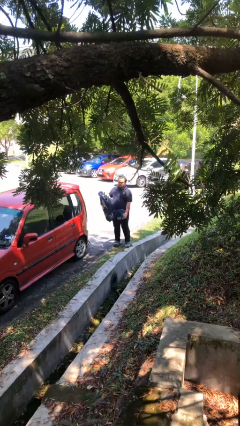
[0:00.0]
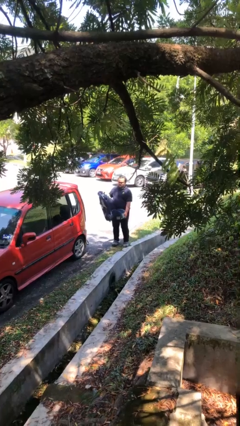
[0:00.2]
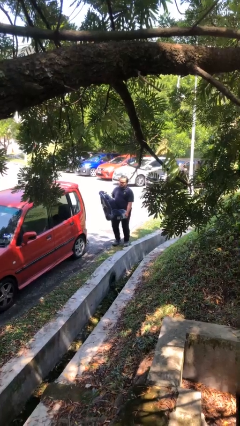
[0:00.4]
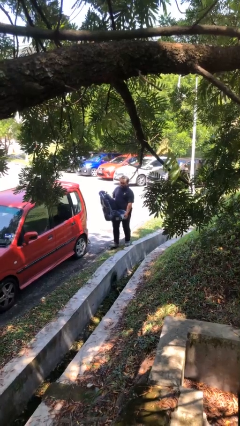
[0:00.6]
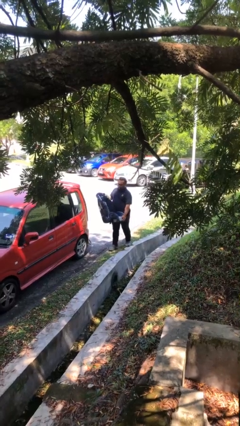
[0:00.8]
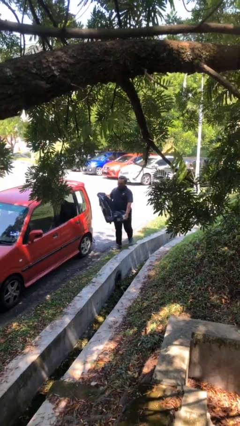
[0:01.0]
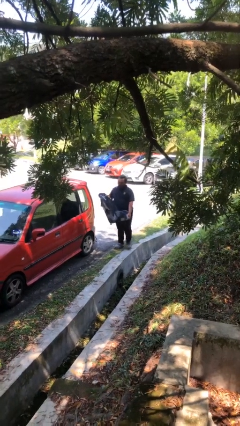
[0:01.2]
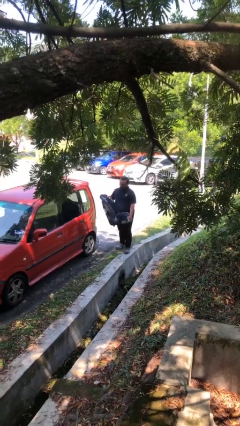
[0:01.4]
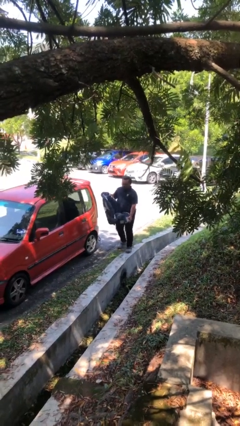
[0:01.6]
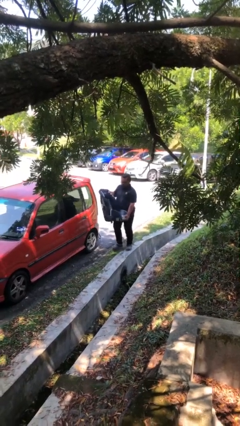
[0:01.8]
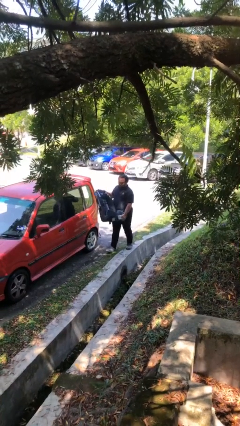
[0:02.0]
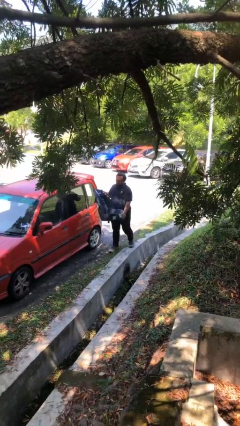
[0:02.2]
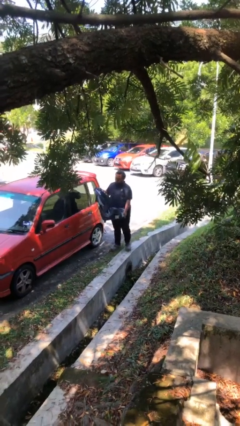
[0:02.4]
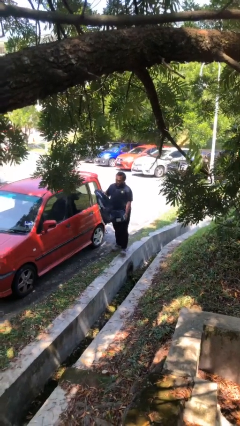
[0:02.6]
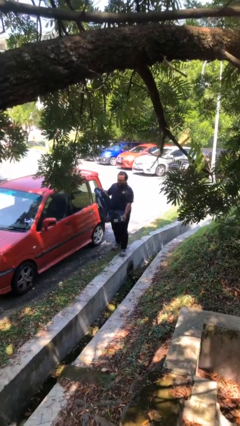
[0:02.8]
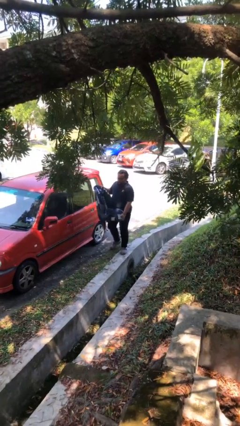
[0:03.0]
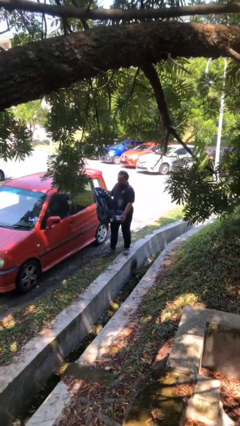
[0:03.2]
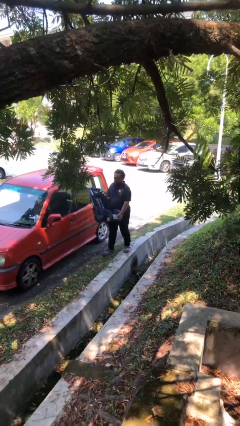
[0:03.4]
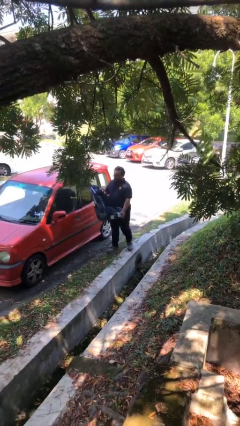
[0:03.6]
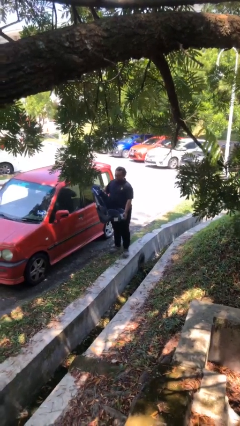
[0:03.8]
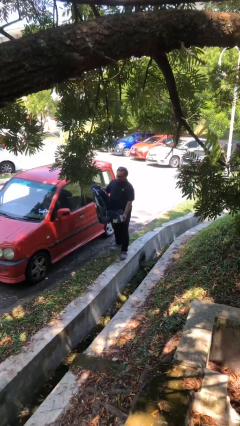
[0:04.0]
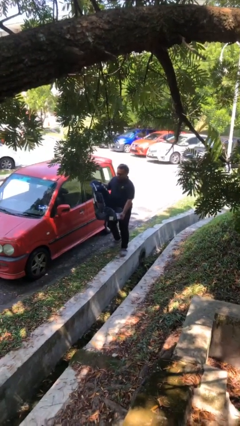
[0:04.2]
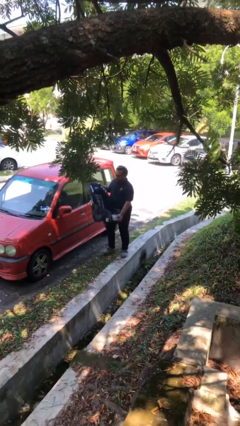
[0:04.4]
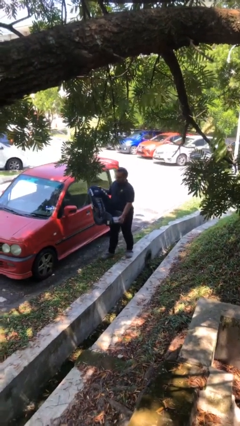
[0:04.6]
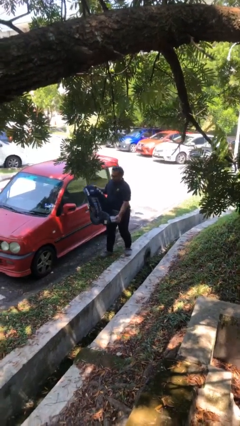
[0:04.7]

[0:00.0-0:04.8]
person carries heavy object

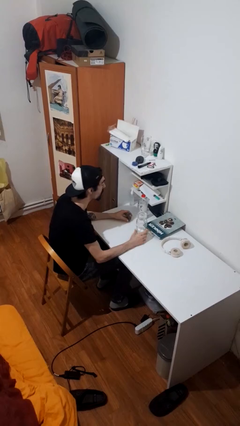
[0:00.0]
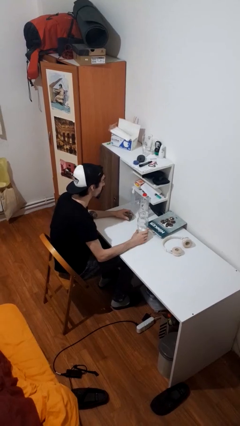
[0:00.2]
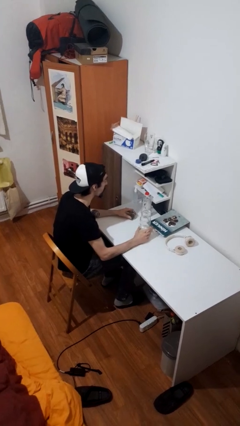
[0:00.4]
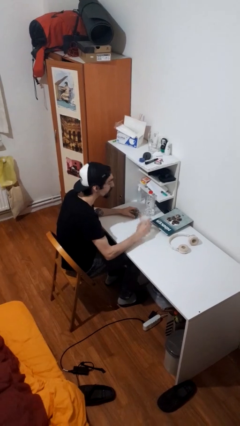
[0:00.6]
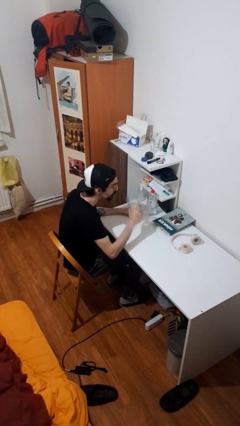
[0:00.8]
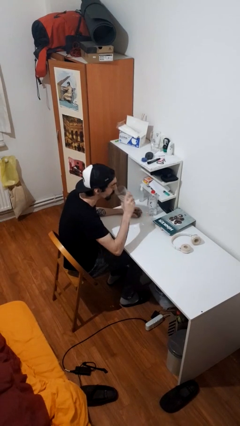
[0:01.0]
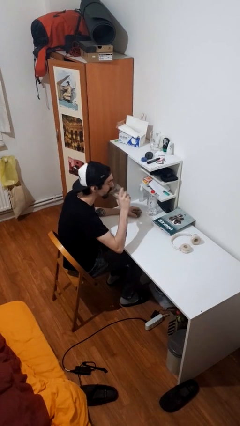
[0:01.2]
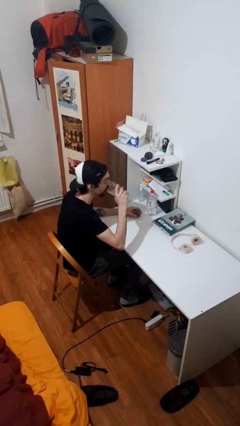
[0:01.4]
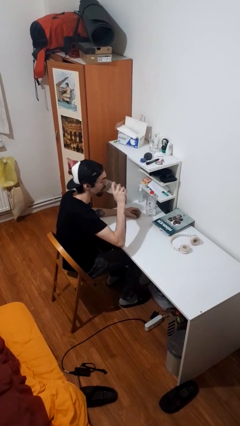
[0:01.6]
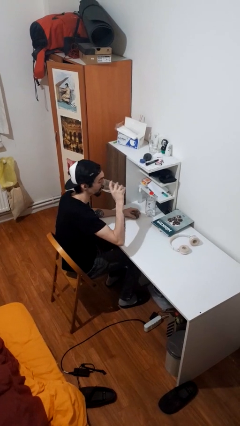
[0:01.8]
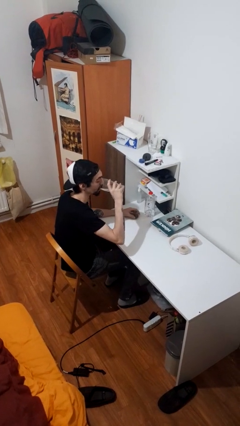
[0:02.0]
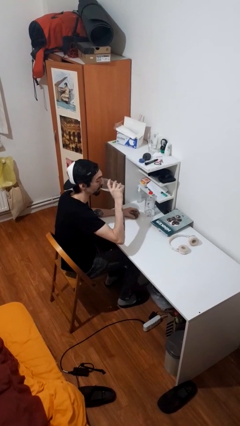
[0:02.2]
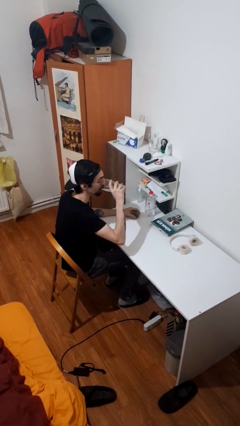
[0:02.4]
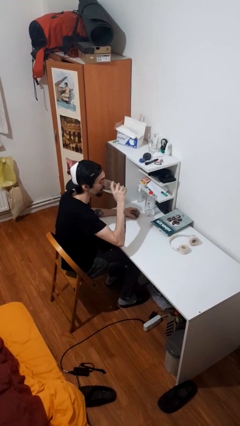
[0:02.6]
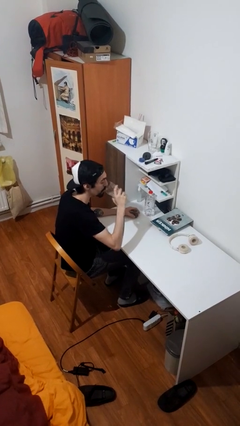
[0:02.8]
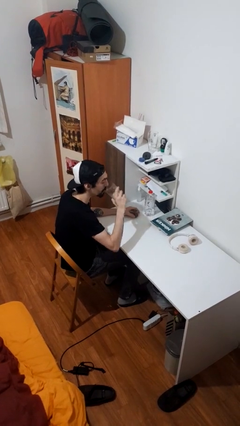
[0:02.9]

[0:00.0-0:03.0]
person drinks from cup

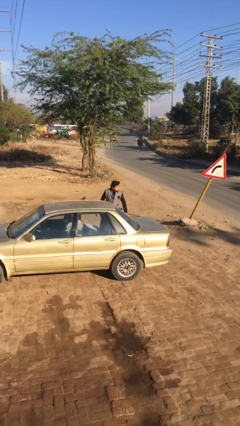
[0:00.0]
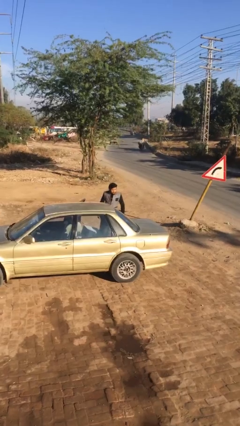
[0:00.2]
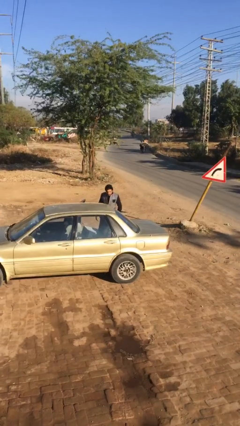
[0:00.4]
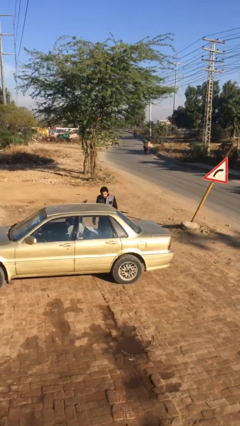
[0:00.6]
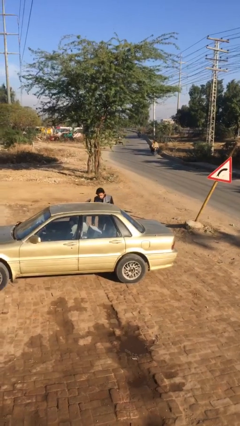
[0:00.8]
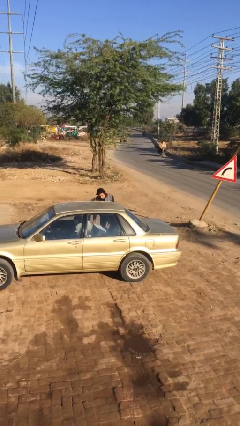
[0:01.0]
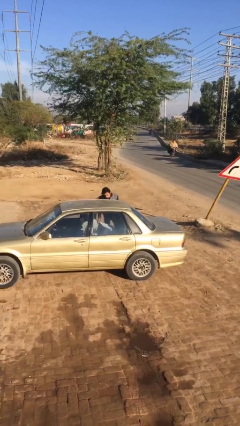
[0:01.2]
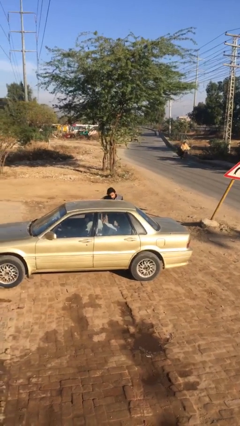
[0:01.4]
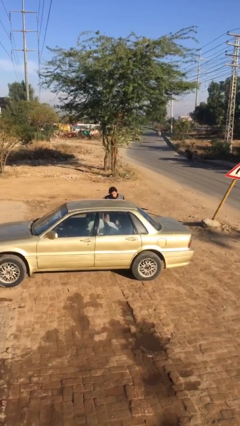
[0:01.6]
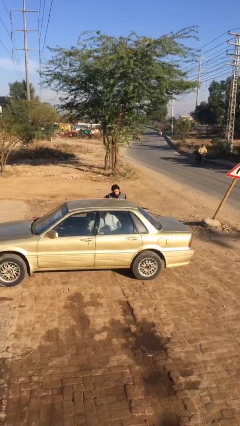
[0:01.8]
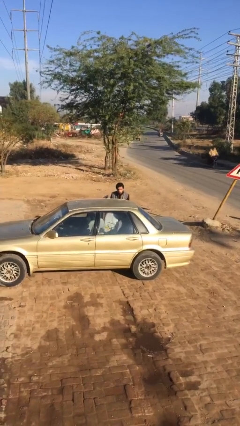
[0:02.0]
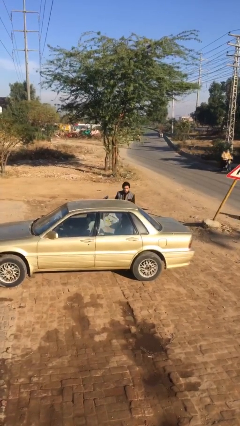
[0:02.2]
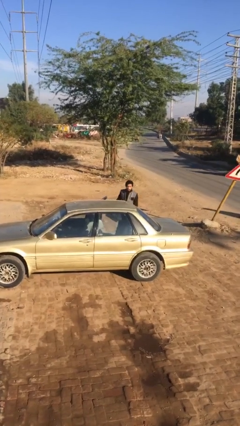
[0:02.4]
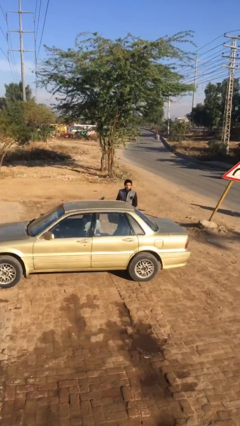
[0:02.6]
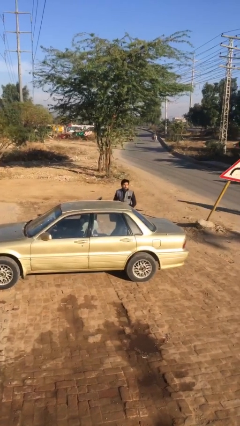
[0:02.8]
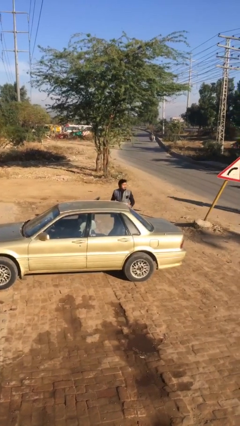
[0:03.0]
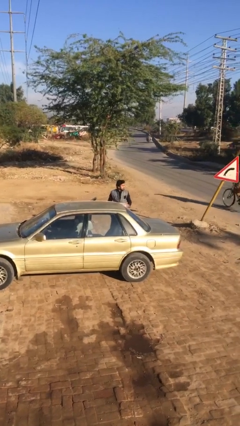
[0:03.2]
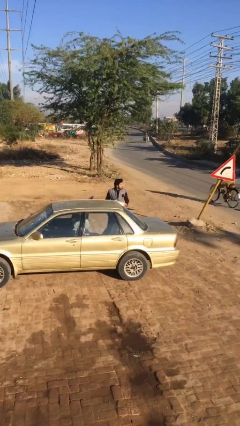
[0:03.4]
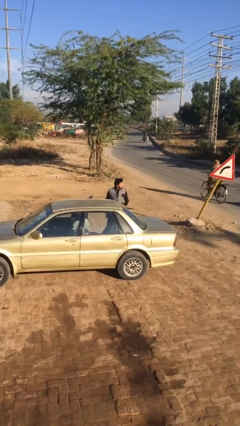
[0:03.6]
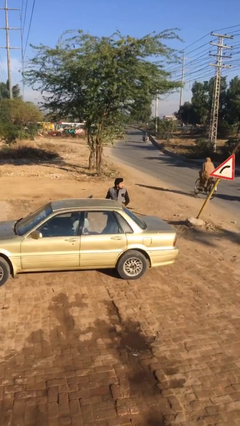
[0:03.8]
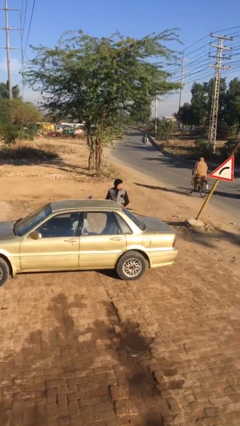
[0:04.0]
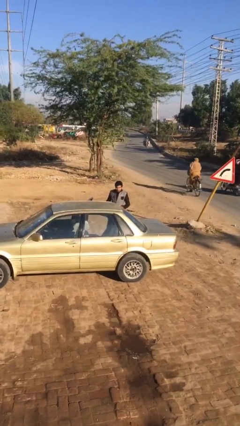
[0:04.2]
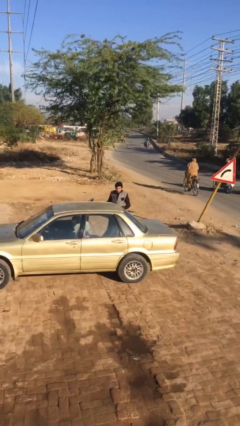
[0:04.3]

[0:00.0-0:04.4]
person unloads car

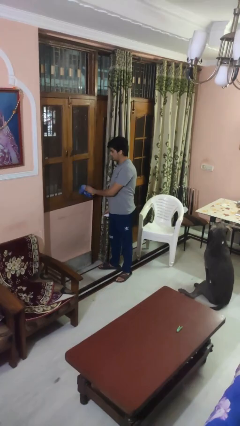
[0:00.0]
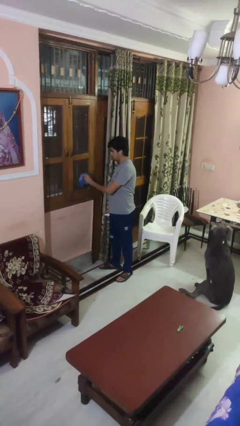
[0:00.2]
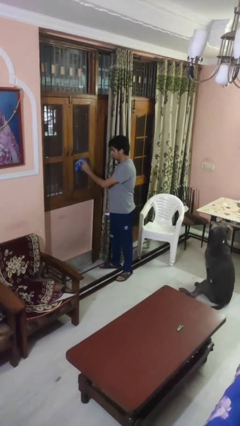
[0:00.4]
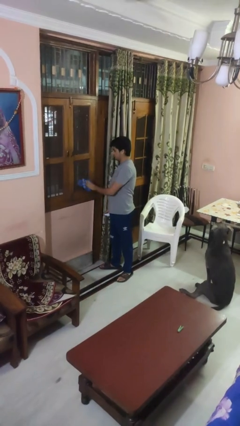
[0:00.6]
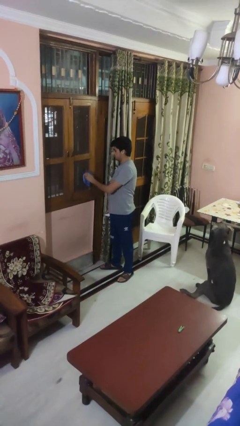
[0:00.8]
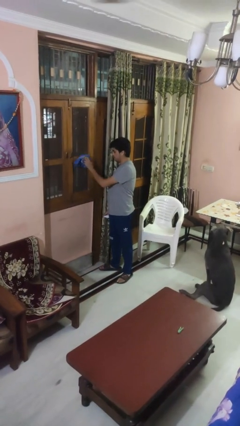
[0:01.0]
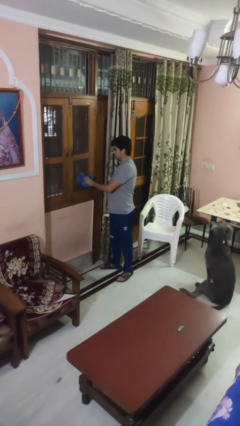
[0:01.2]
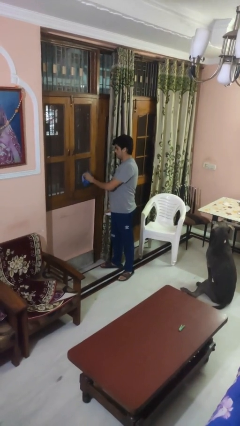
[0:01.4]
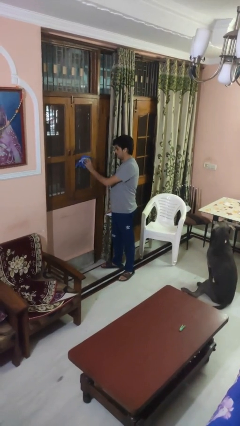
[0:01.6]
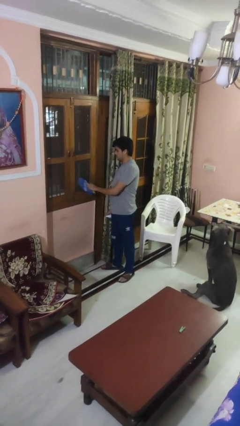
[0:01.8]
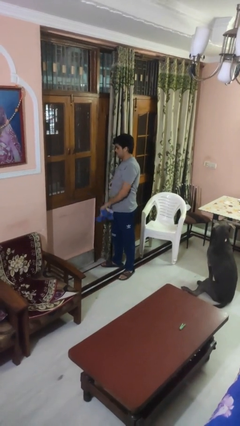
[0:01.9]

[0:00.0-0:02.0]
person washes window

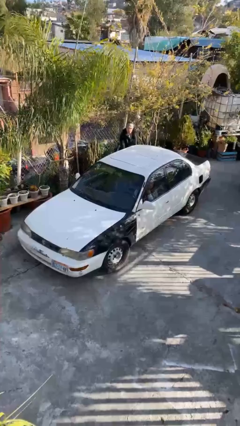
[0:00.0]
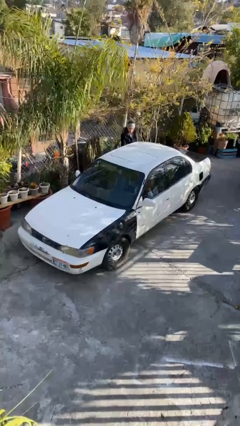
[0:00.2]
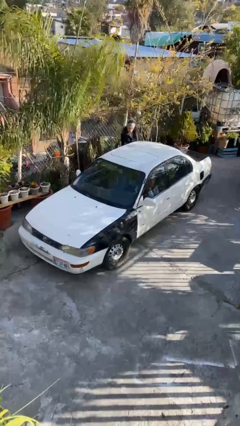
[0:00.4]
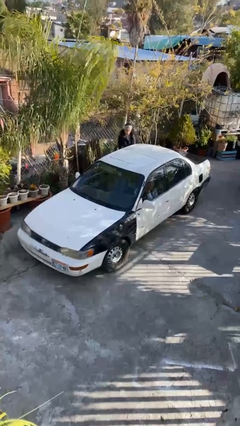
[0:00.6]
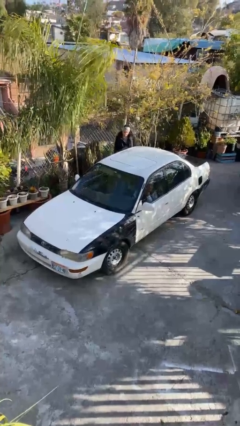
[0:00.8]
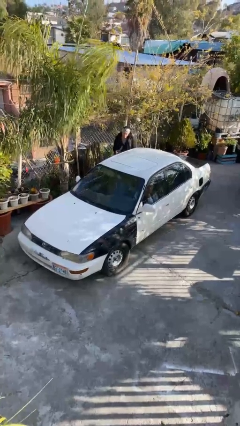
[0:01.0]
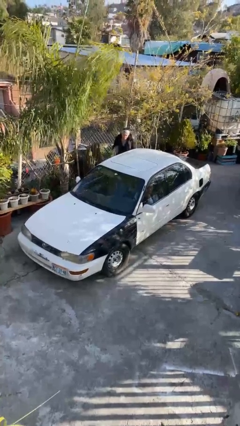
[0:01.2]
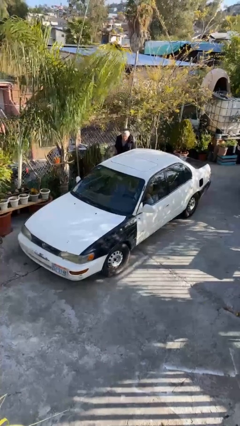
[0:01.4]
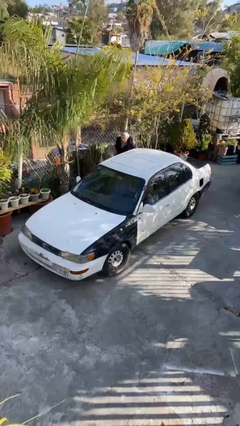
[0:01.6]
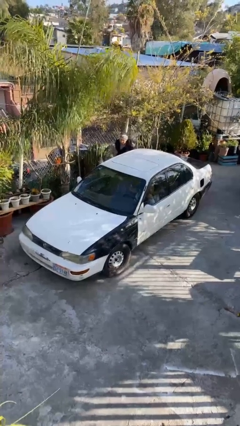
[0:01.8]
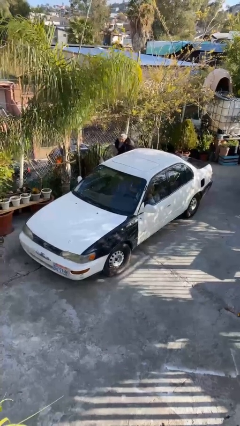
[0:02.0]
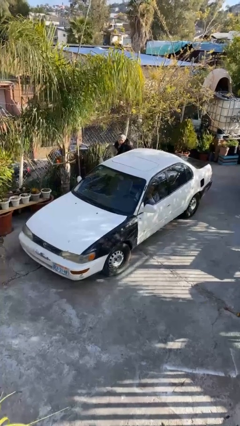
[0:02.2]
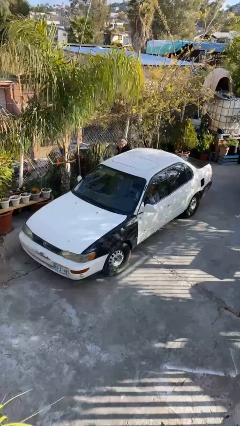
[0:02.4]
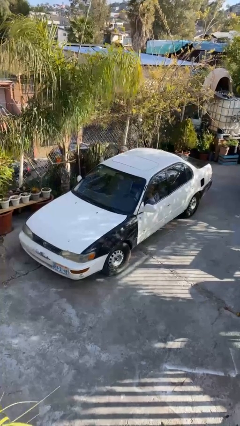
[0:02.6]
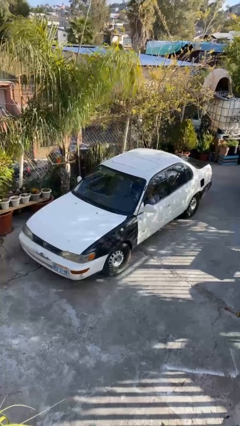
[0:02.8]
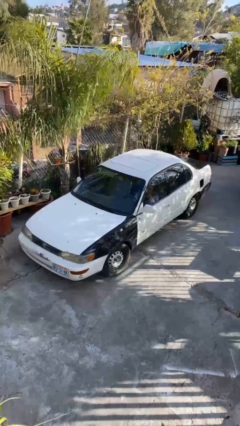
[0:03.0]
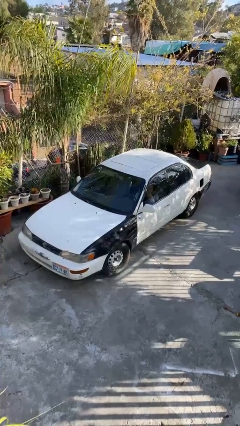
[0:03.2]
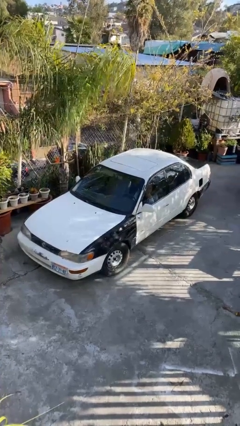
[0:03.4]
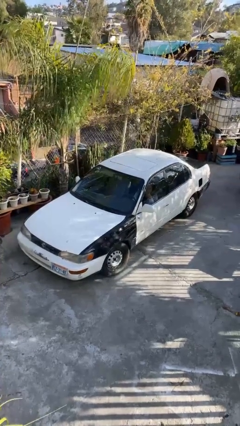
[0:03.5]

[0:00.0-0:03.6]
car picks up person
